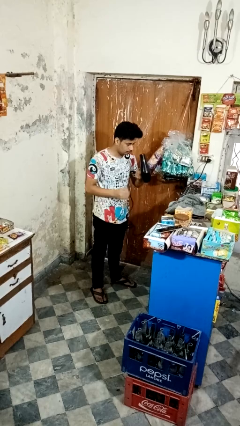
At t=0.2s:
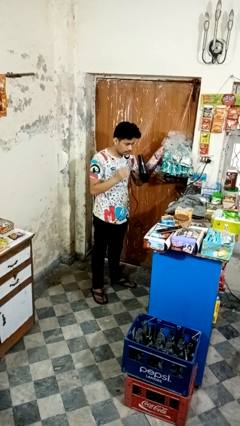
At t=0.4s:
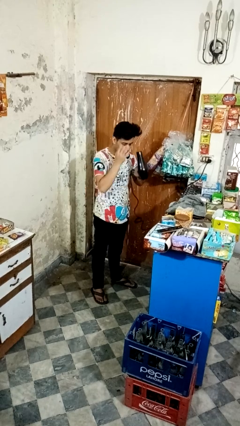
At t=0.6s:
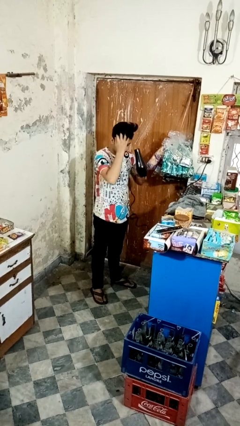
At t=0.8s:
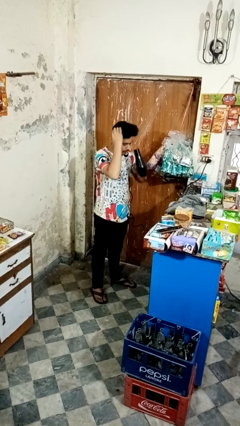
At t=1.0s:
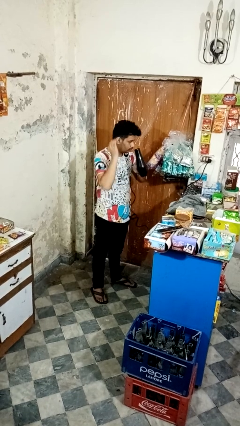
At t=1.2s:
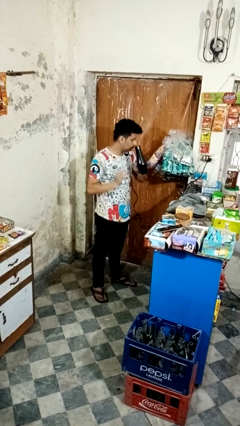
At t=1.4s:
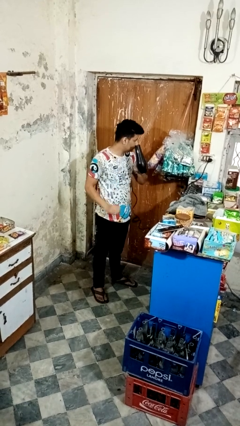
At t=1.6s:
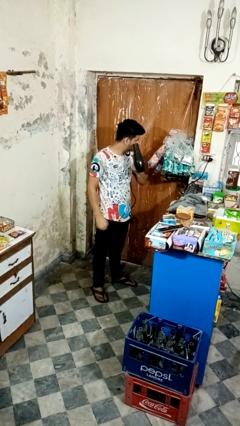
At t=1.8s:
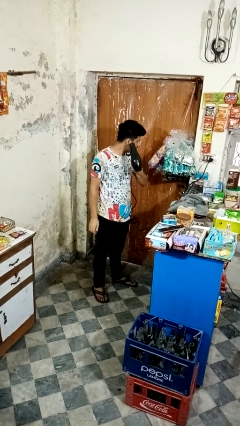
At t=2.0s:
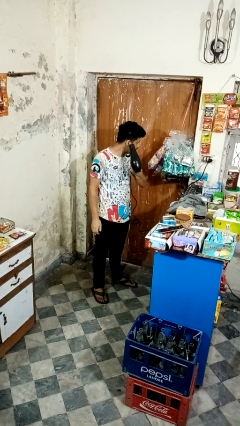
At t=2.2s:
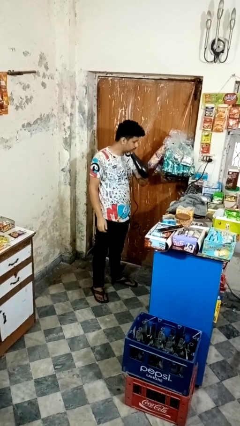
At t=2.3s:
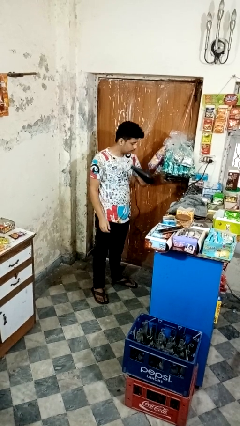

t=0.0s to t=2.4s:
person dries hair with hairdryer

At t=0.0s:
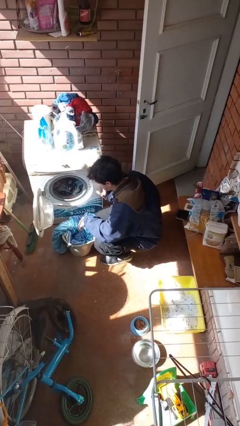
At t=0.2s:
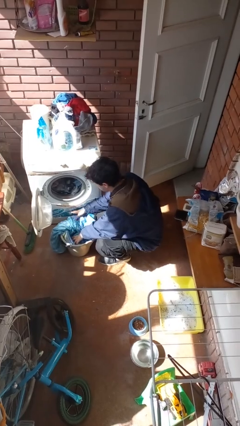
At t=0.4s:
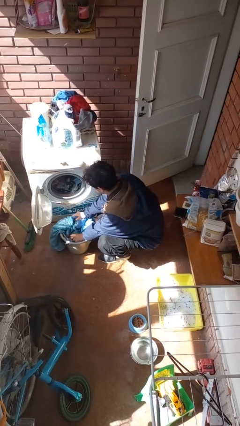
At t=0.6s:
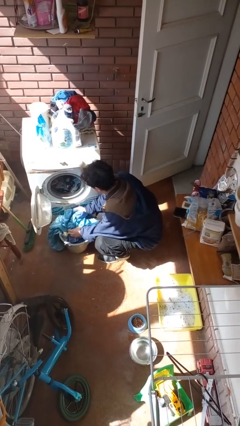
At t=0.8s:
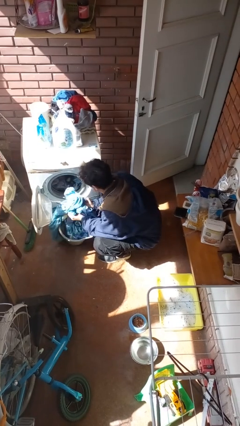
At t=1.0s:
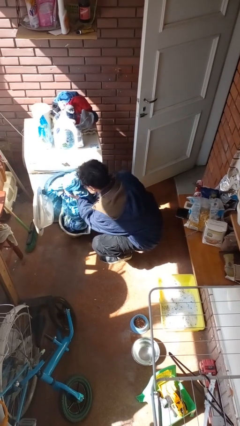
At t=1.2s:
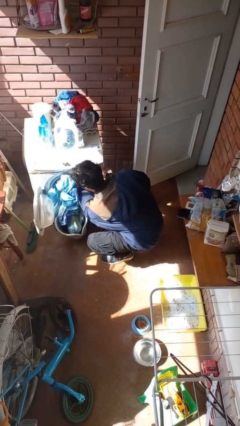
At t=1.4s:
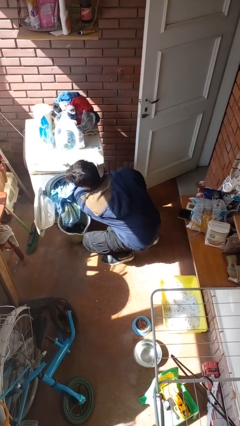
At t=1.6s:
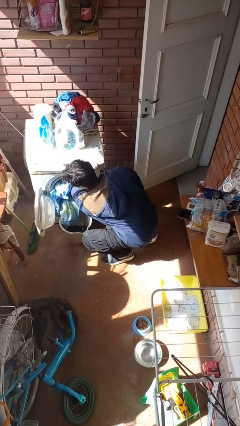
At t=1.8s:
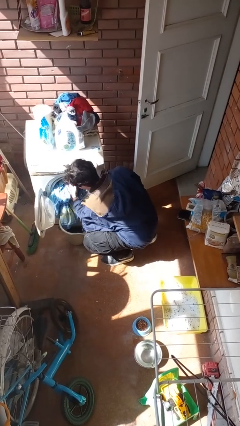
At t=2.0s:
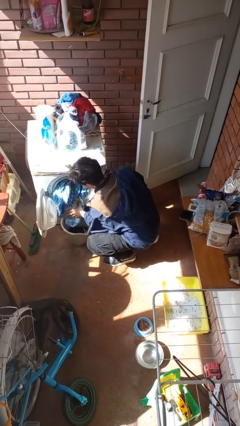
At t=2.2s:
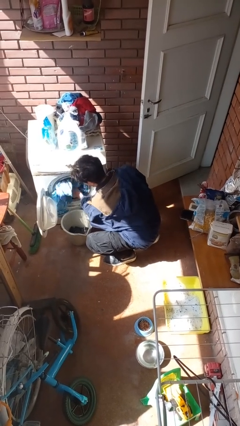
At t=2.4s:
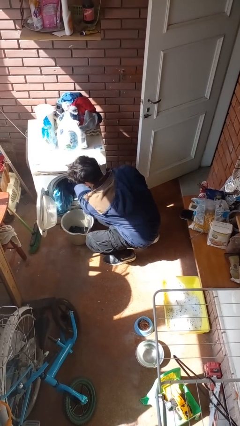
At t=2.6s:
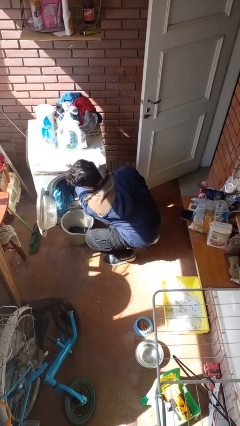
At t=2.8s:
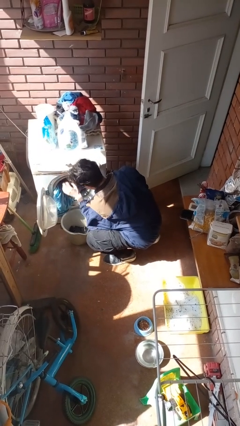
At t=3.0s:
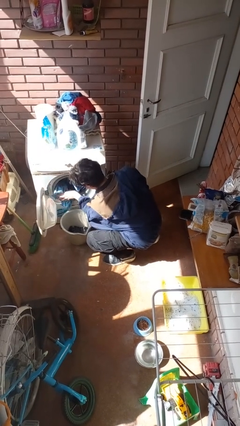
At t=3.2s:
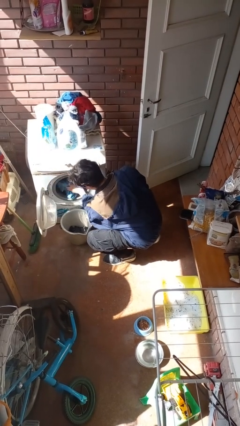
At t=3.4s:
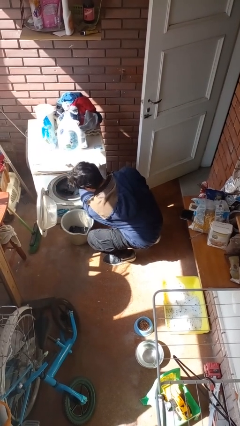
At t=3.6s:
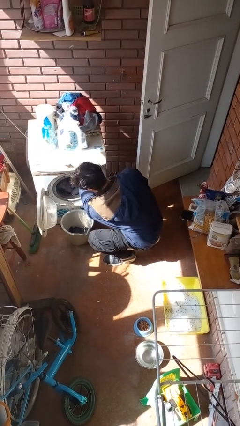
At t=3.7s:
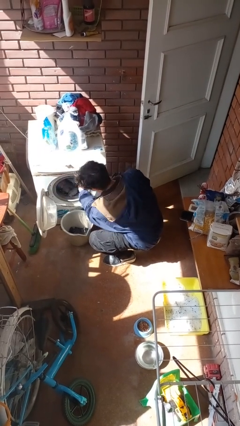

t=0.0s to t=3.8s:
person loads clotheswasher

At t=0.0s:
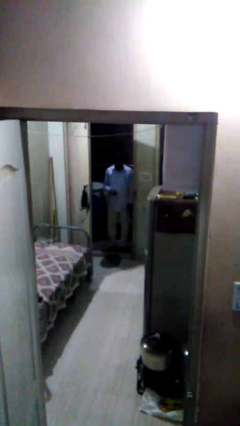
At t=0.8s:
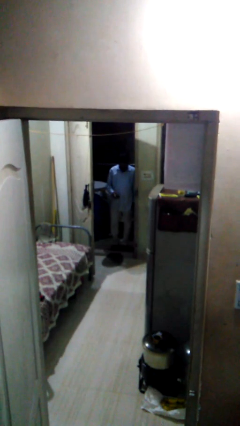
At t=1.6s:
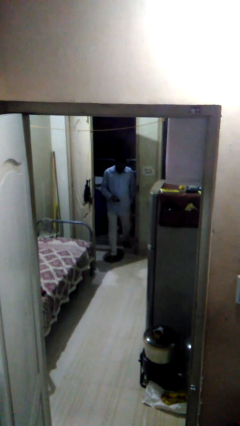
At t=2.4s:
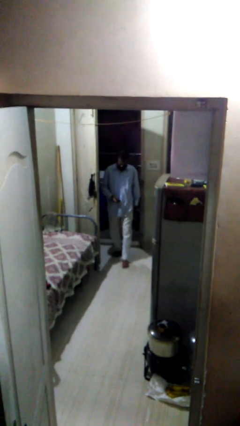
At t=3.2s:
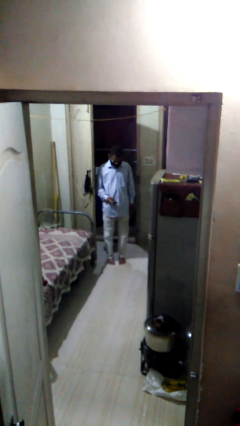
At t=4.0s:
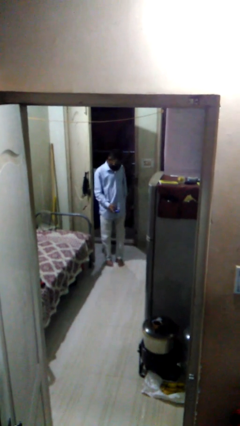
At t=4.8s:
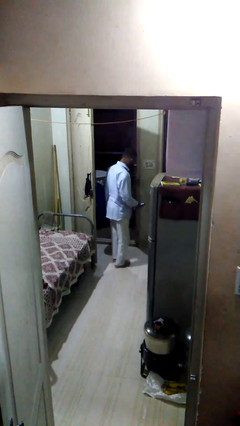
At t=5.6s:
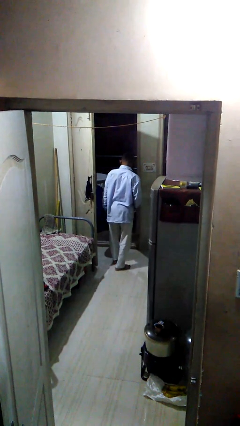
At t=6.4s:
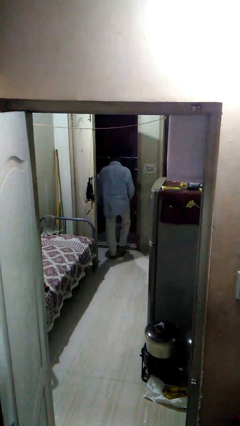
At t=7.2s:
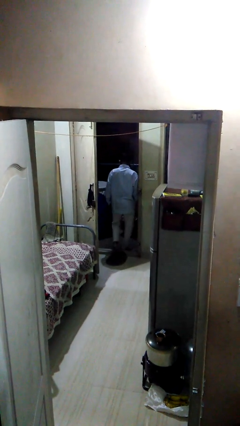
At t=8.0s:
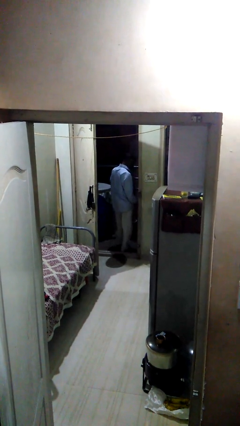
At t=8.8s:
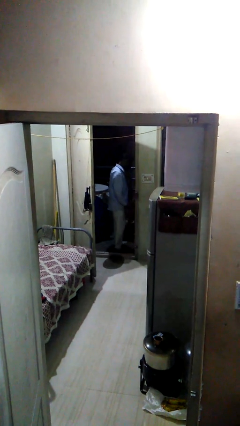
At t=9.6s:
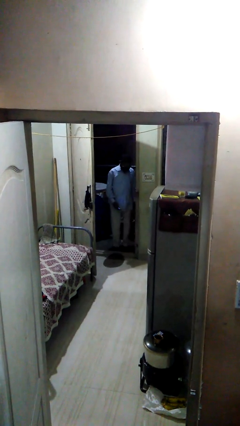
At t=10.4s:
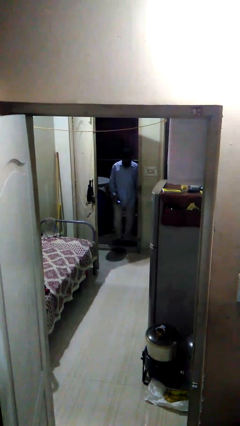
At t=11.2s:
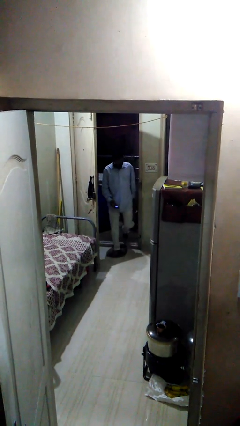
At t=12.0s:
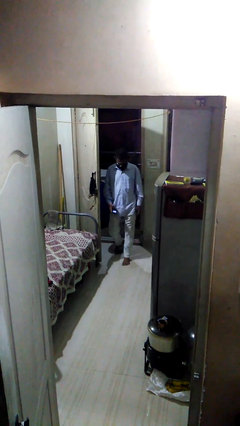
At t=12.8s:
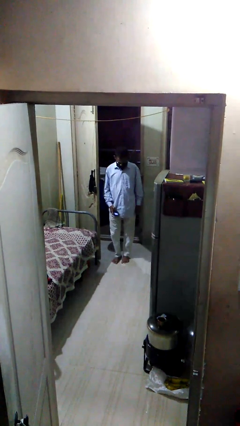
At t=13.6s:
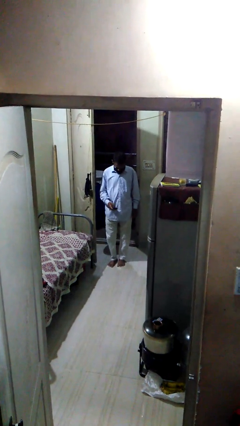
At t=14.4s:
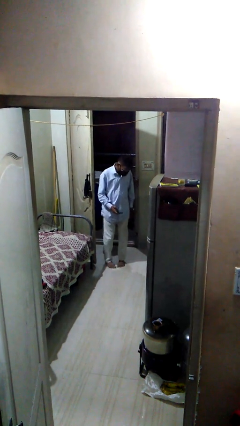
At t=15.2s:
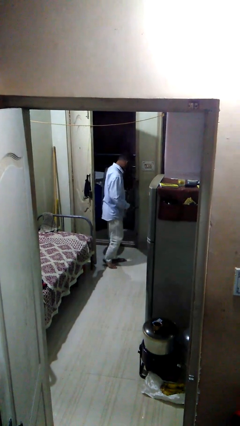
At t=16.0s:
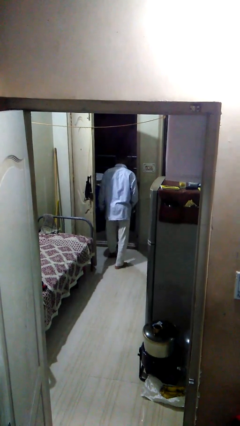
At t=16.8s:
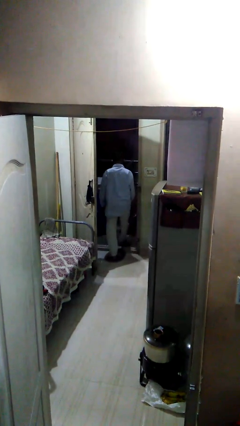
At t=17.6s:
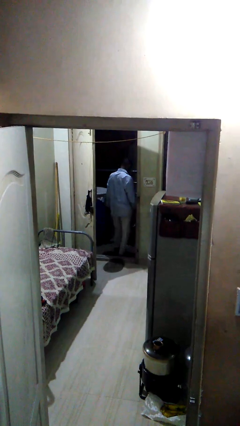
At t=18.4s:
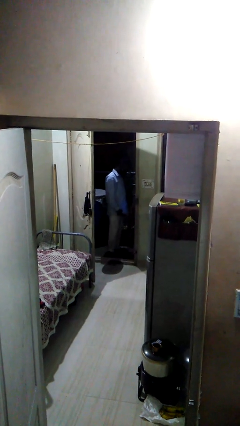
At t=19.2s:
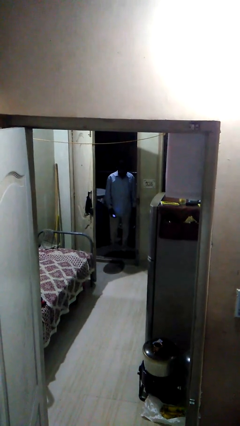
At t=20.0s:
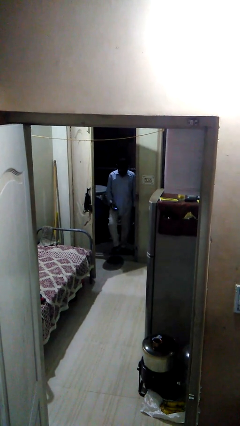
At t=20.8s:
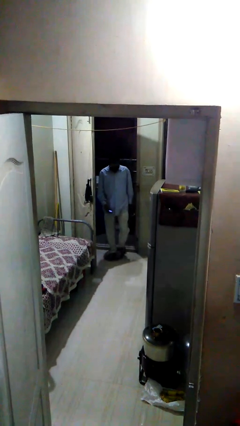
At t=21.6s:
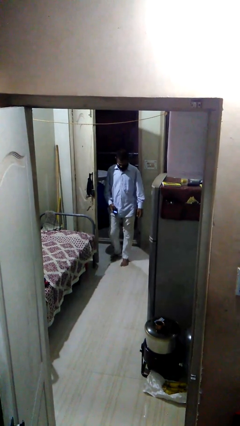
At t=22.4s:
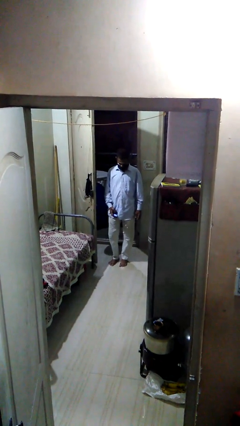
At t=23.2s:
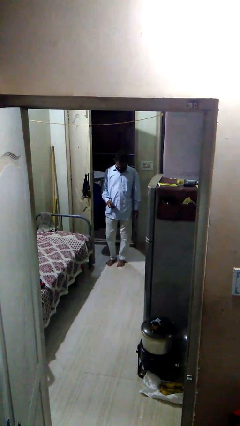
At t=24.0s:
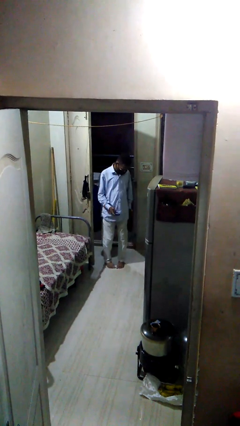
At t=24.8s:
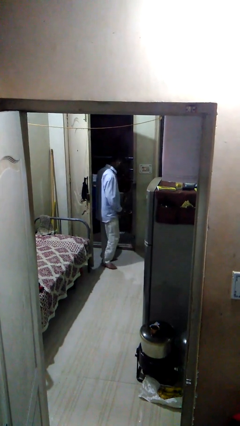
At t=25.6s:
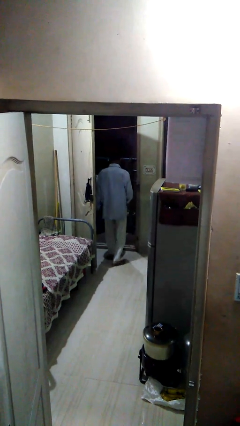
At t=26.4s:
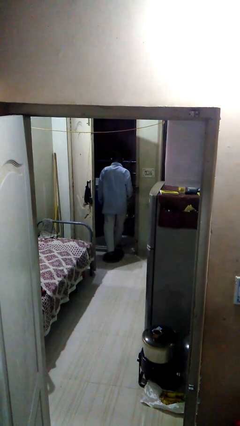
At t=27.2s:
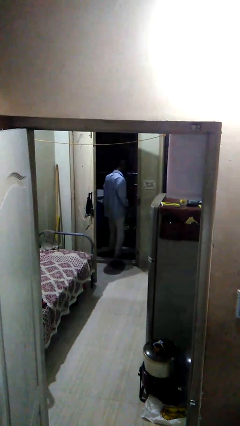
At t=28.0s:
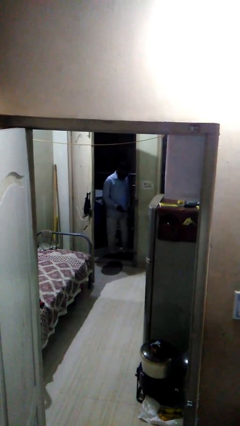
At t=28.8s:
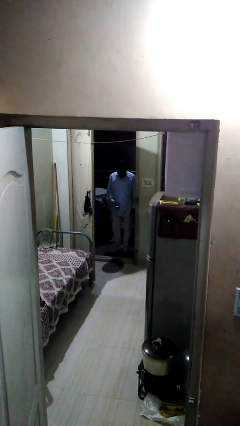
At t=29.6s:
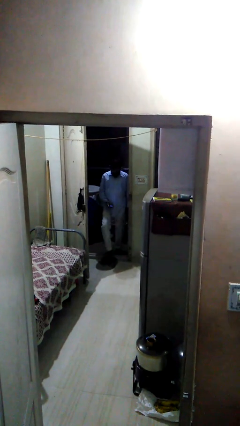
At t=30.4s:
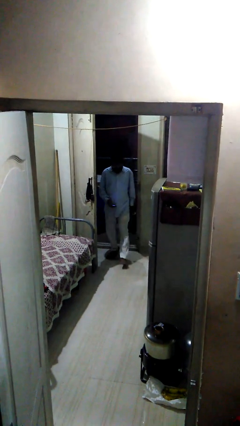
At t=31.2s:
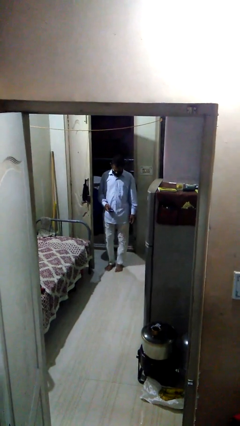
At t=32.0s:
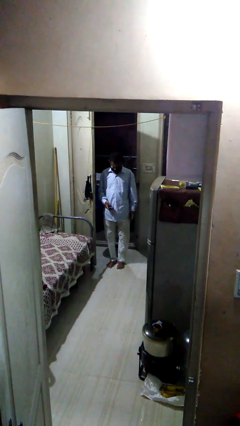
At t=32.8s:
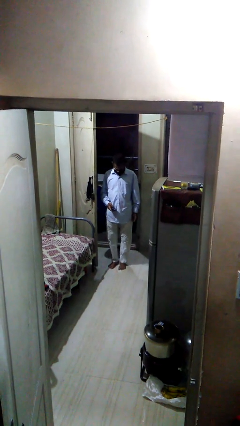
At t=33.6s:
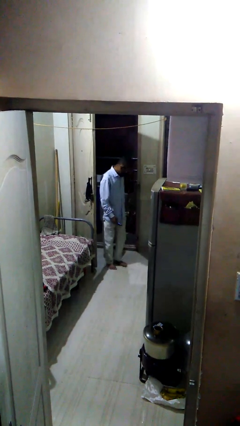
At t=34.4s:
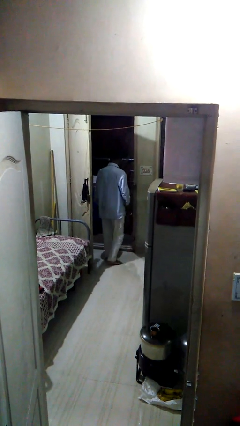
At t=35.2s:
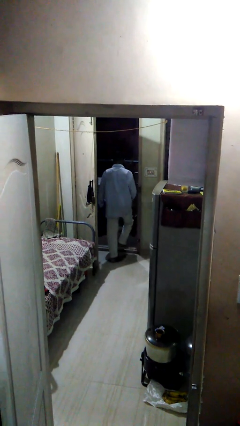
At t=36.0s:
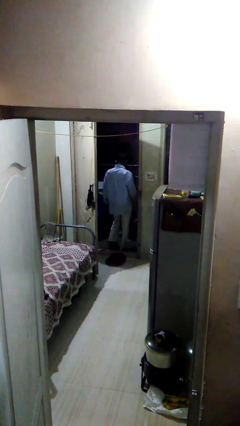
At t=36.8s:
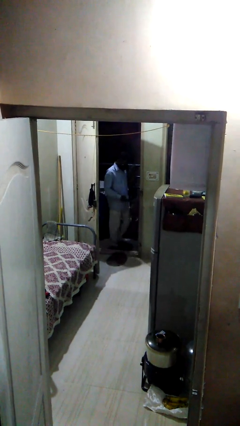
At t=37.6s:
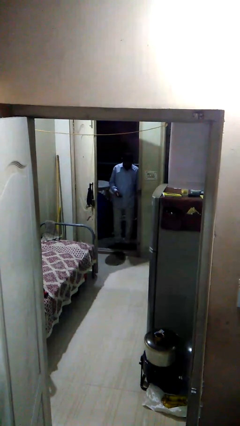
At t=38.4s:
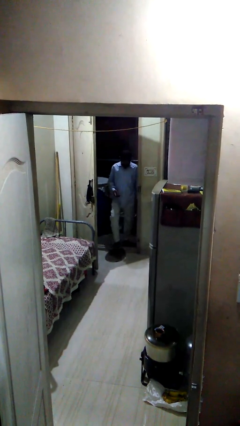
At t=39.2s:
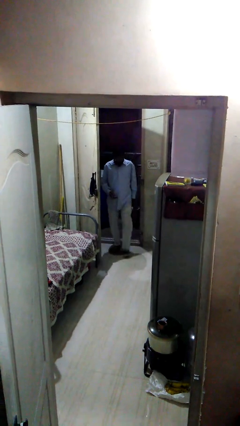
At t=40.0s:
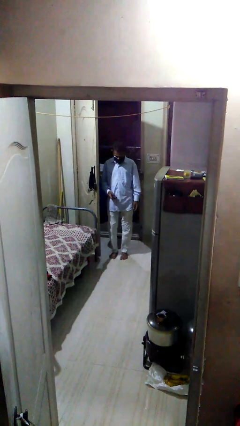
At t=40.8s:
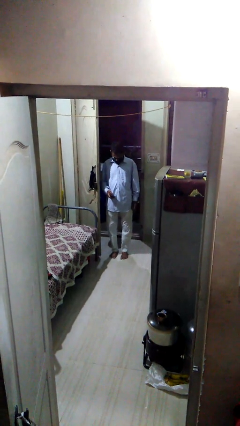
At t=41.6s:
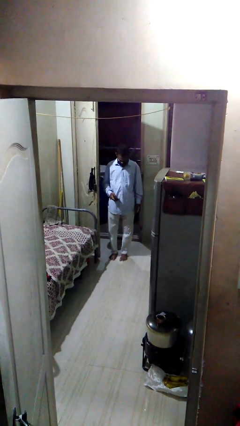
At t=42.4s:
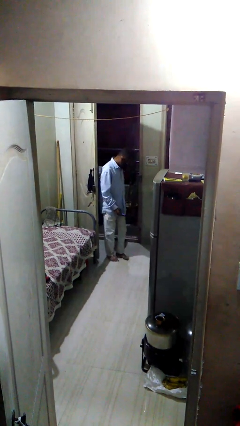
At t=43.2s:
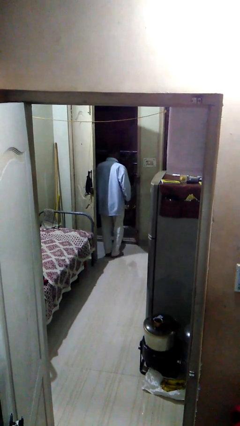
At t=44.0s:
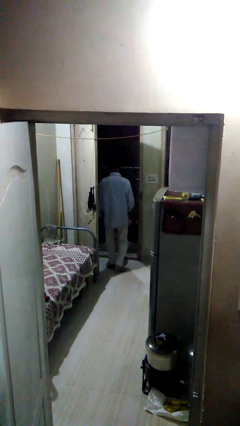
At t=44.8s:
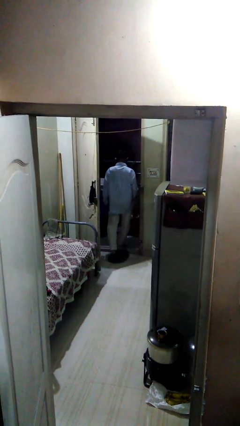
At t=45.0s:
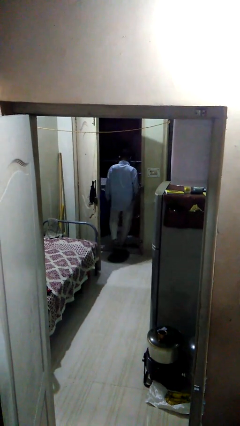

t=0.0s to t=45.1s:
person texts on phone
